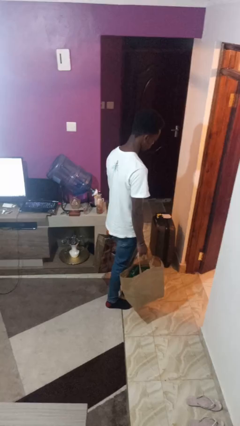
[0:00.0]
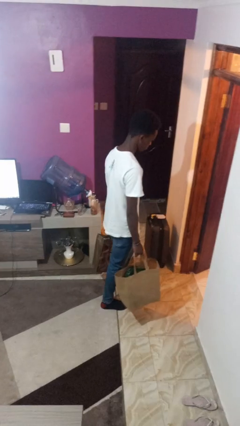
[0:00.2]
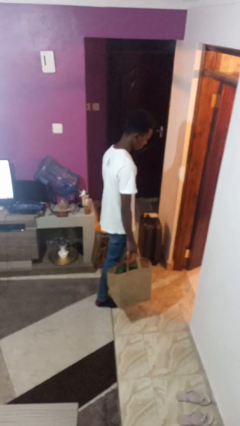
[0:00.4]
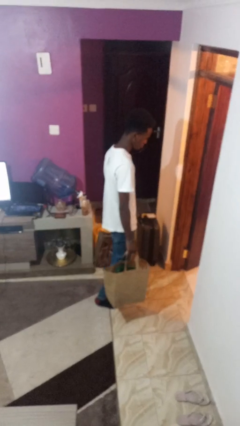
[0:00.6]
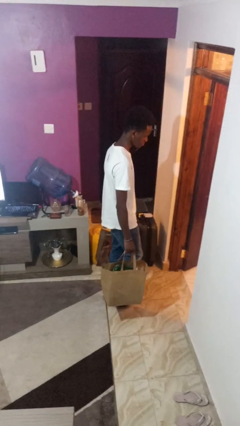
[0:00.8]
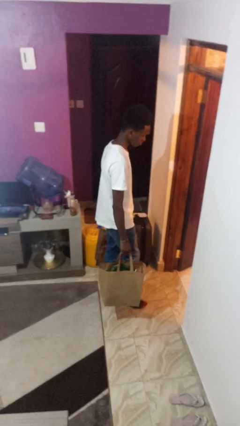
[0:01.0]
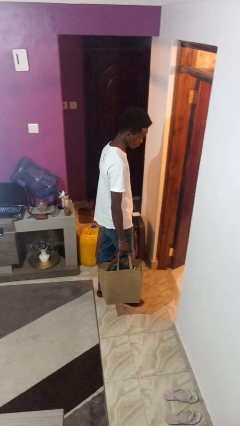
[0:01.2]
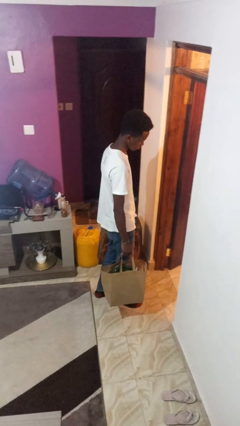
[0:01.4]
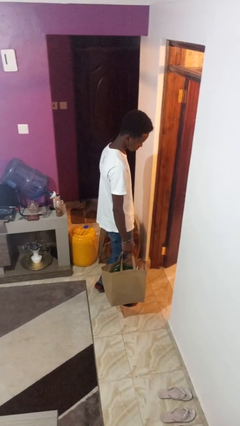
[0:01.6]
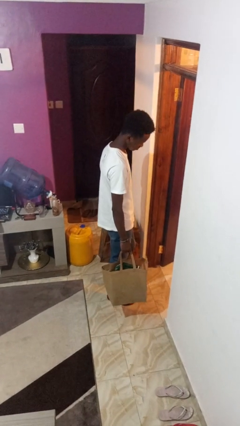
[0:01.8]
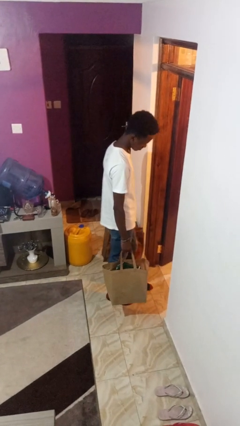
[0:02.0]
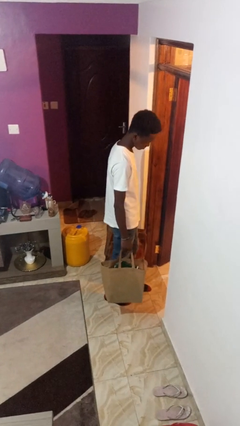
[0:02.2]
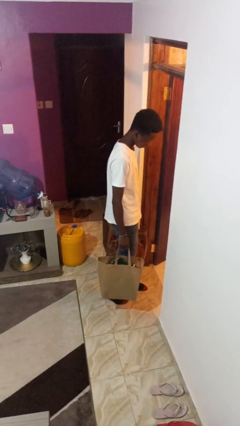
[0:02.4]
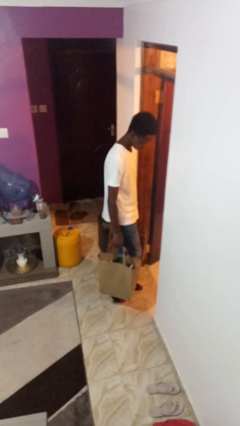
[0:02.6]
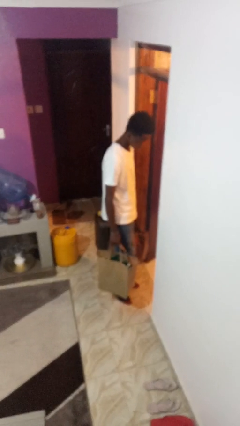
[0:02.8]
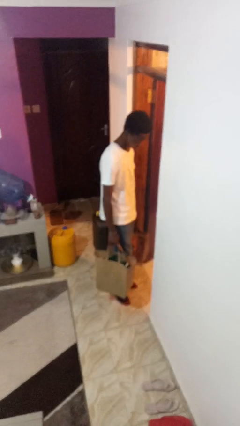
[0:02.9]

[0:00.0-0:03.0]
person carries groceries

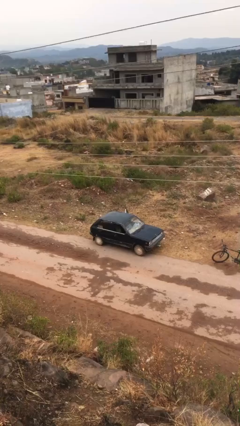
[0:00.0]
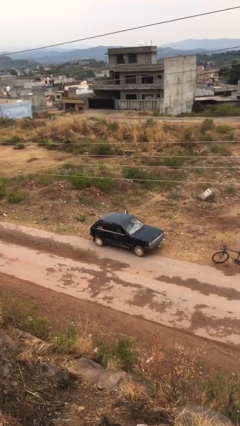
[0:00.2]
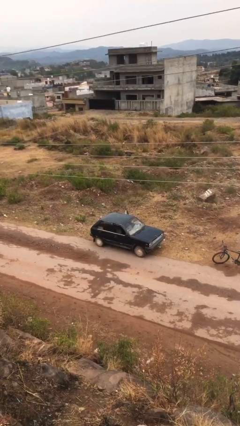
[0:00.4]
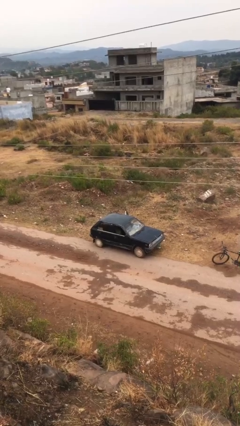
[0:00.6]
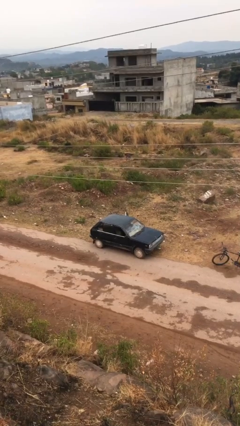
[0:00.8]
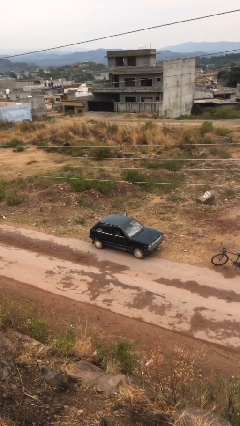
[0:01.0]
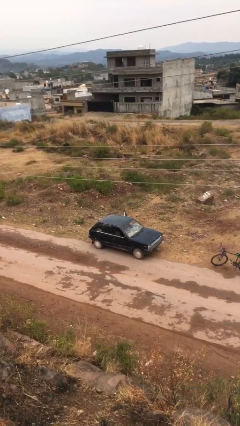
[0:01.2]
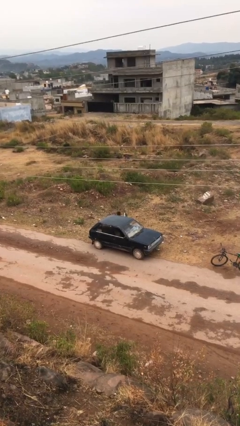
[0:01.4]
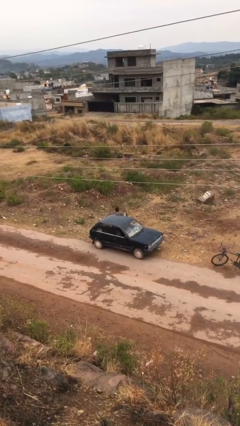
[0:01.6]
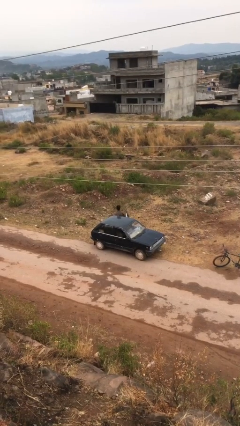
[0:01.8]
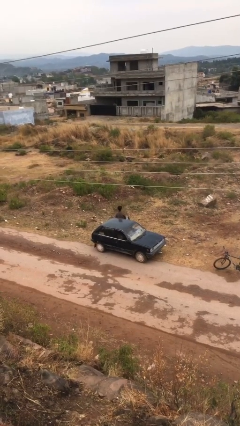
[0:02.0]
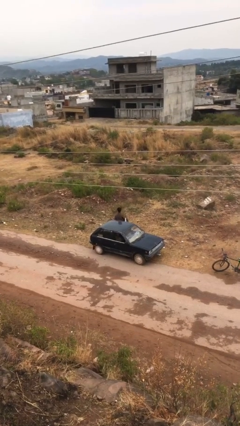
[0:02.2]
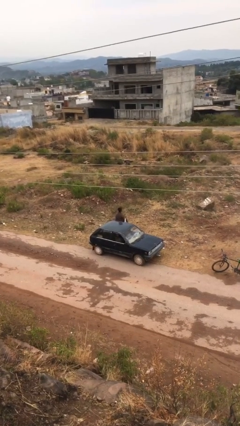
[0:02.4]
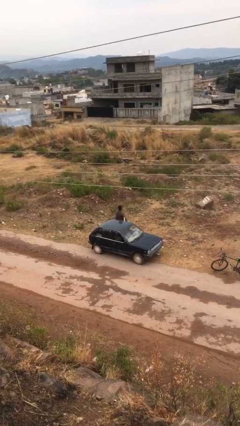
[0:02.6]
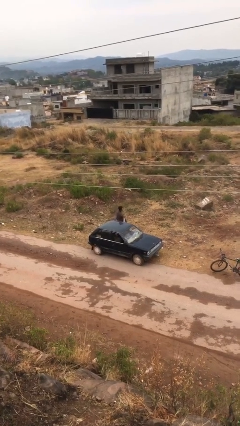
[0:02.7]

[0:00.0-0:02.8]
person exits car

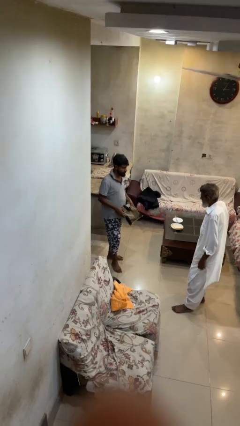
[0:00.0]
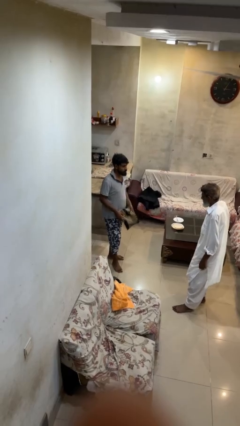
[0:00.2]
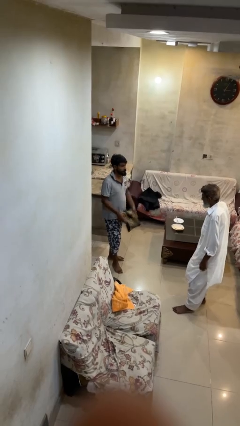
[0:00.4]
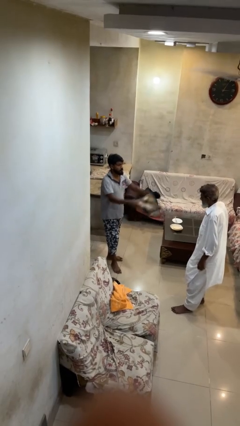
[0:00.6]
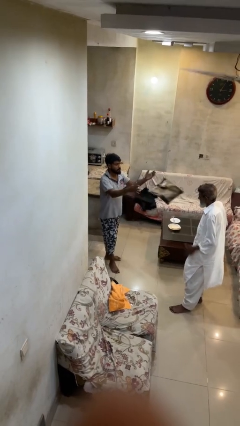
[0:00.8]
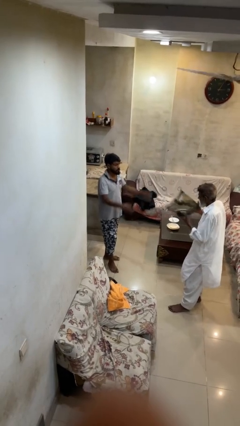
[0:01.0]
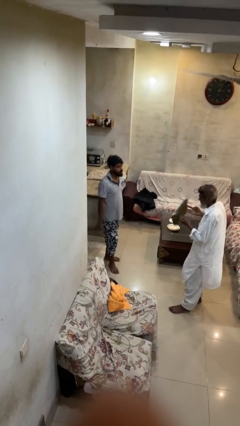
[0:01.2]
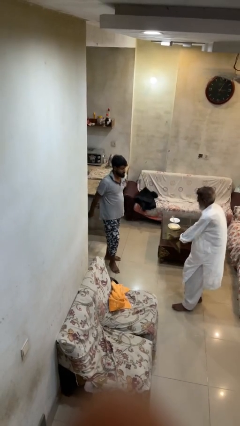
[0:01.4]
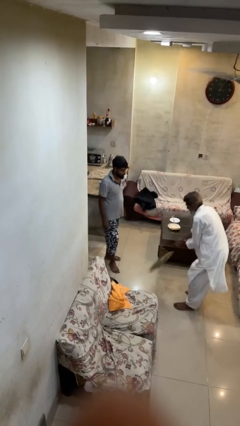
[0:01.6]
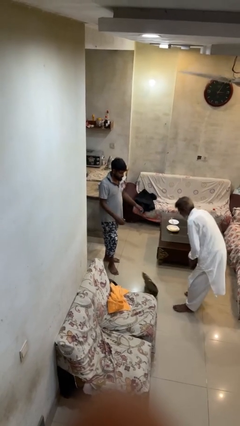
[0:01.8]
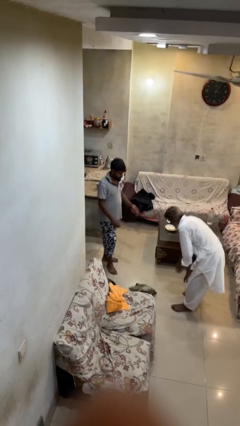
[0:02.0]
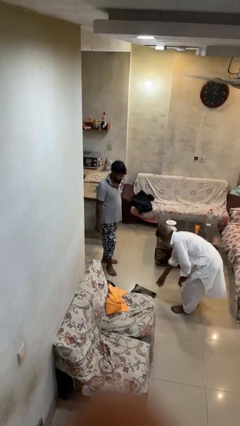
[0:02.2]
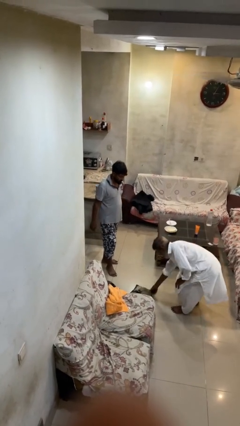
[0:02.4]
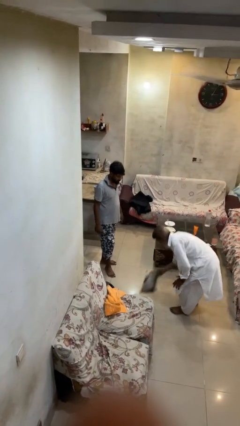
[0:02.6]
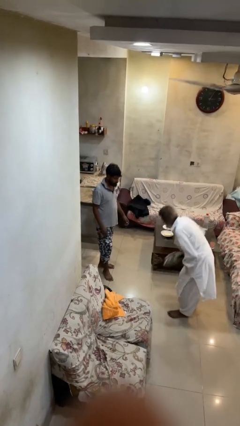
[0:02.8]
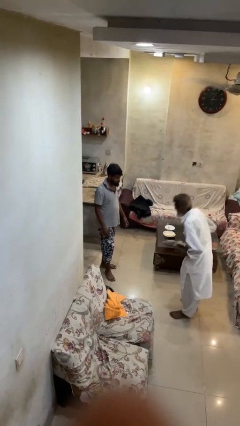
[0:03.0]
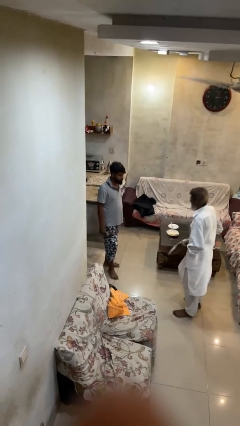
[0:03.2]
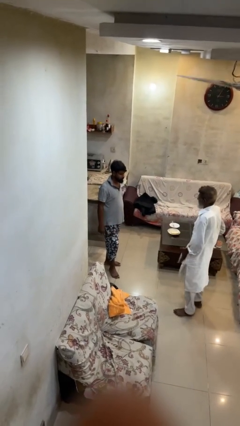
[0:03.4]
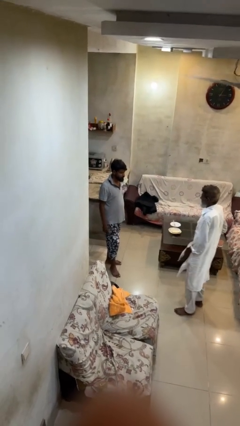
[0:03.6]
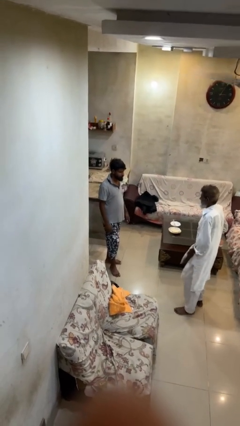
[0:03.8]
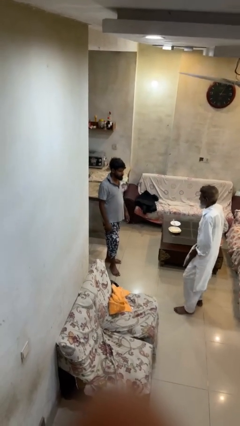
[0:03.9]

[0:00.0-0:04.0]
person throws object to person

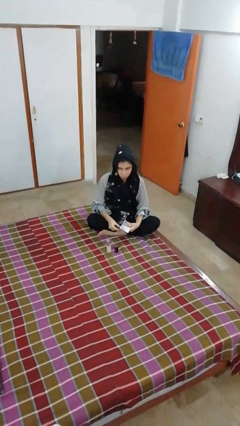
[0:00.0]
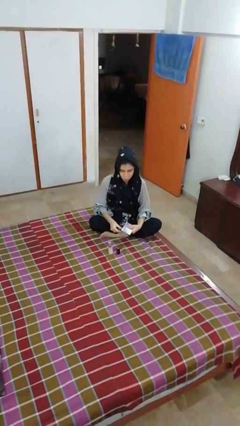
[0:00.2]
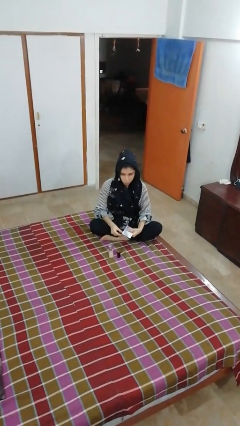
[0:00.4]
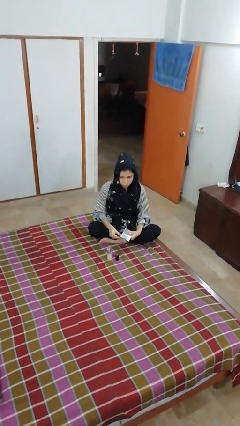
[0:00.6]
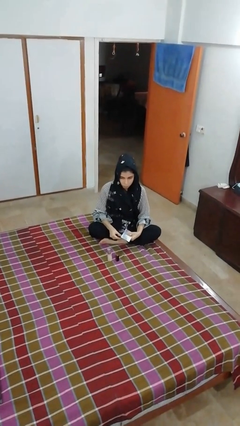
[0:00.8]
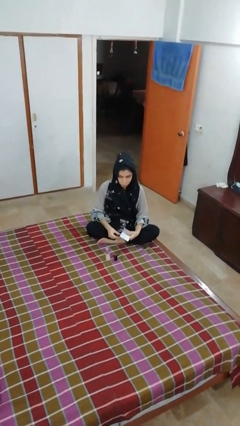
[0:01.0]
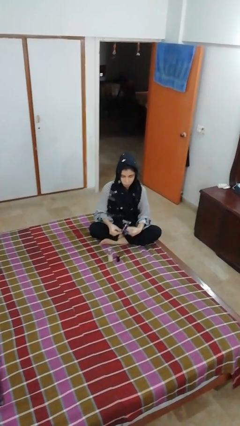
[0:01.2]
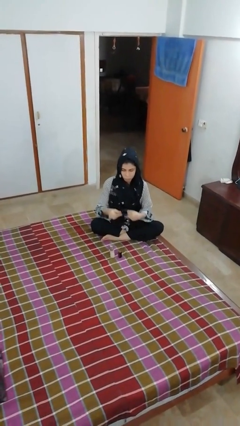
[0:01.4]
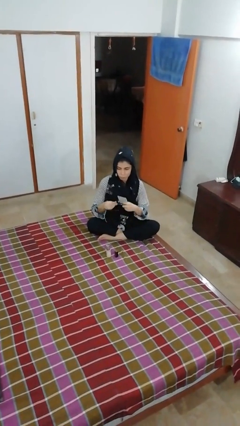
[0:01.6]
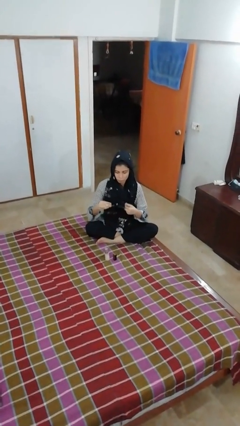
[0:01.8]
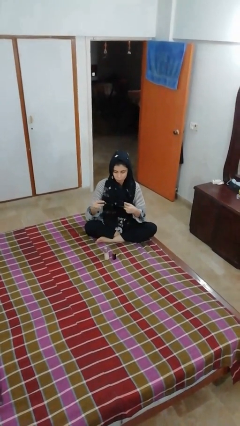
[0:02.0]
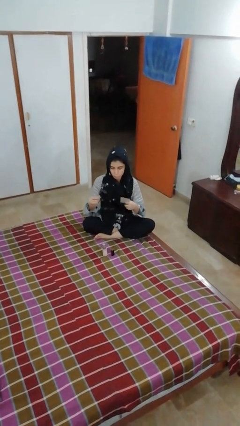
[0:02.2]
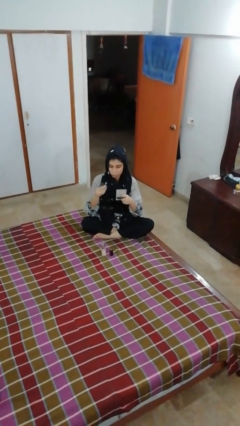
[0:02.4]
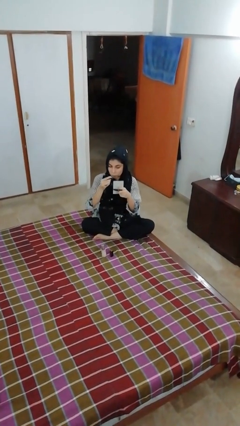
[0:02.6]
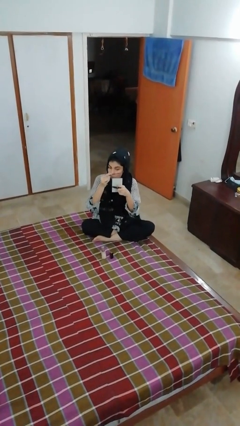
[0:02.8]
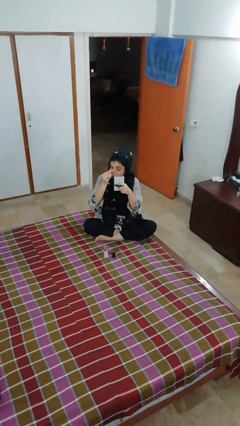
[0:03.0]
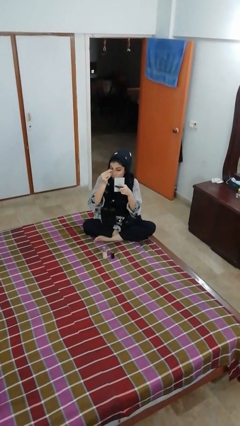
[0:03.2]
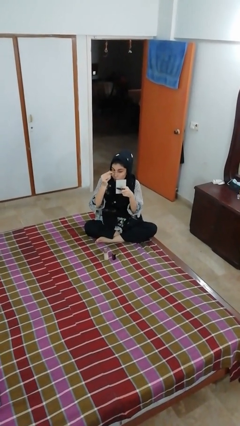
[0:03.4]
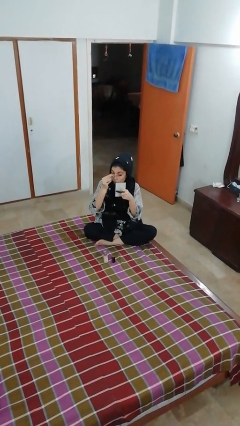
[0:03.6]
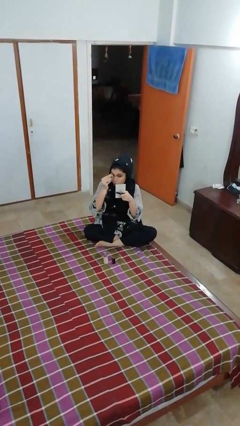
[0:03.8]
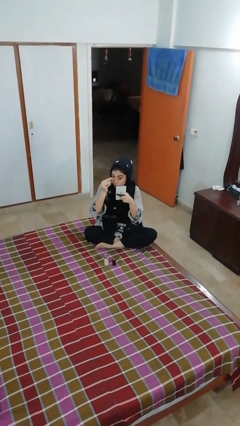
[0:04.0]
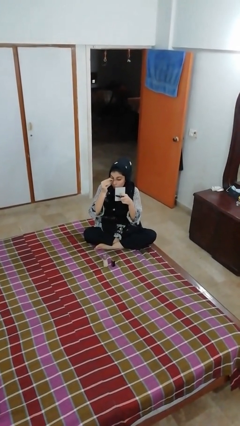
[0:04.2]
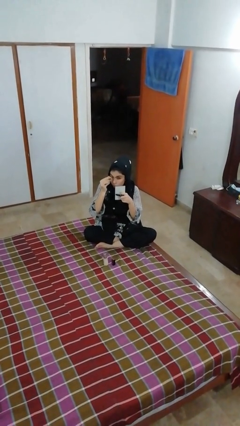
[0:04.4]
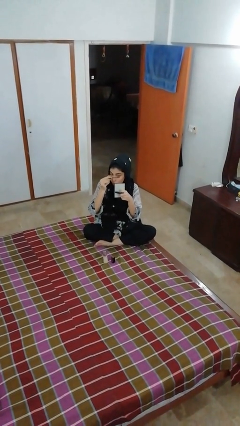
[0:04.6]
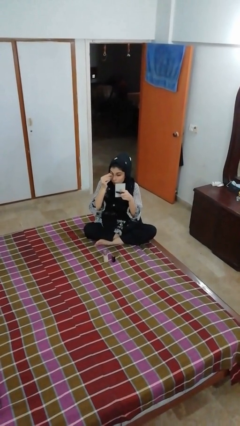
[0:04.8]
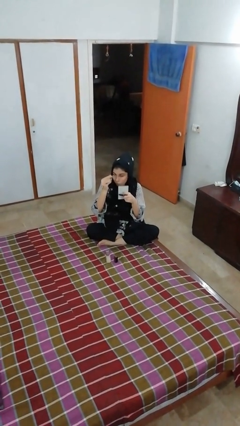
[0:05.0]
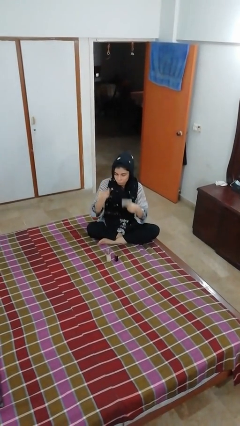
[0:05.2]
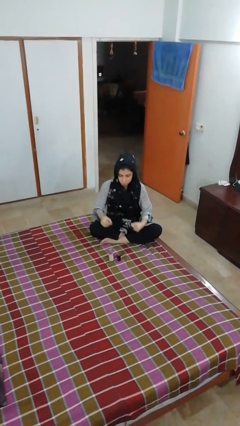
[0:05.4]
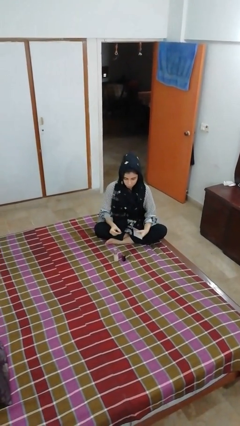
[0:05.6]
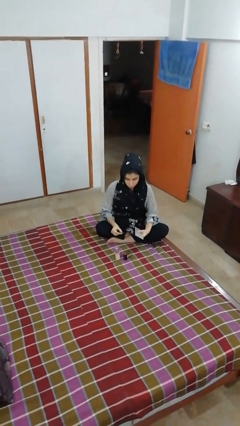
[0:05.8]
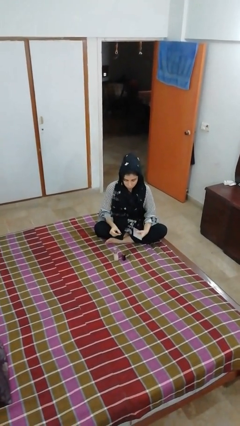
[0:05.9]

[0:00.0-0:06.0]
person applies eye makeup

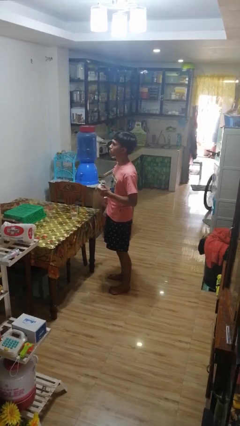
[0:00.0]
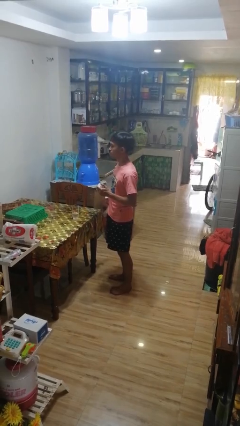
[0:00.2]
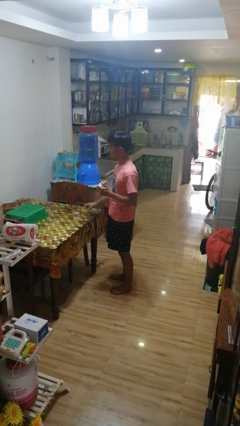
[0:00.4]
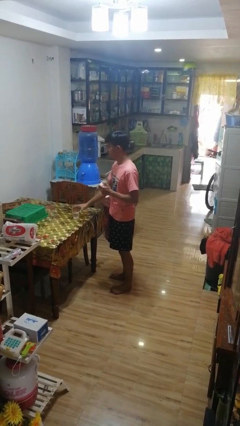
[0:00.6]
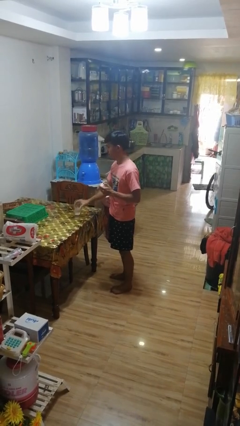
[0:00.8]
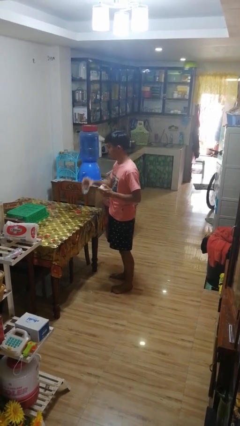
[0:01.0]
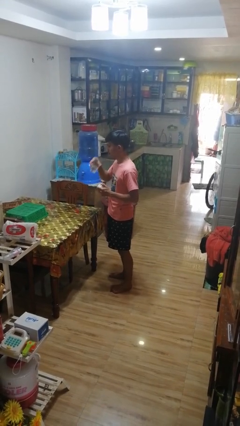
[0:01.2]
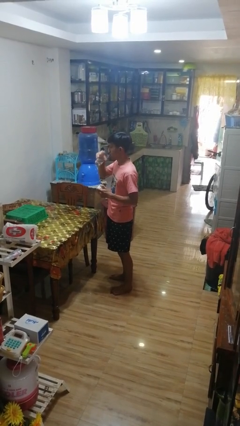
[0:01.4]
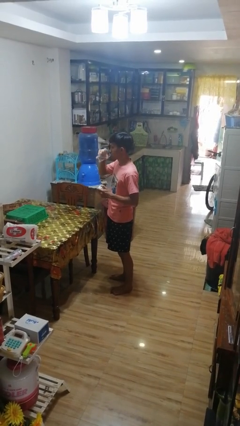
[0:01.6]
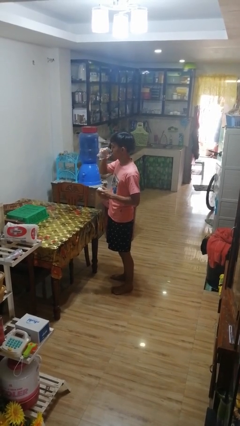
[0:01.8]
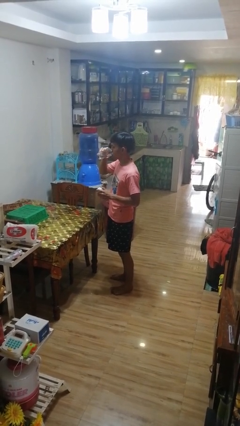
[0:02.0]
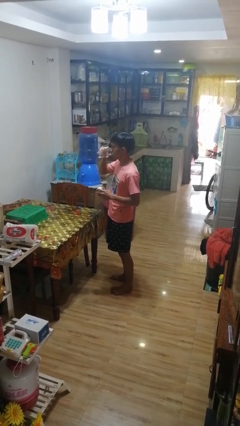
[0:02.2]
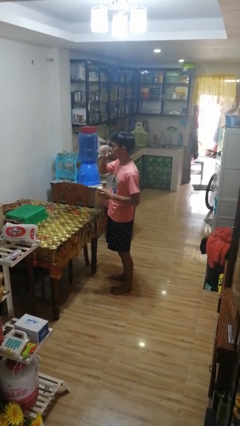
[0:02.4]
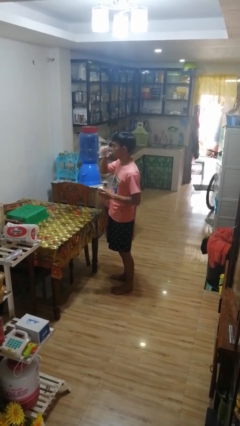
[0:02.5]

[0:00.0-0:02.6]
person drinks from cup
